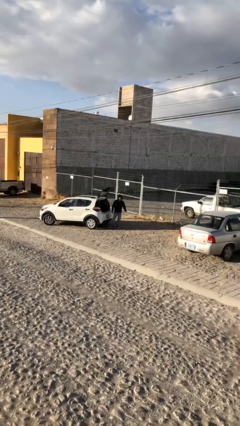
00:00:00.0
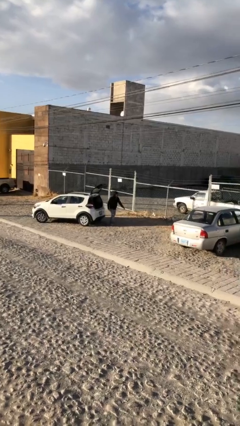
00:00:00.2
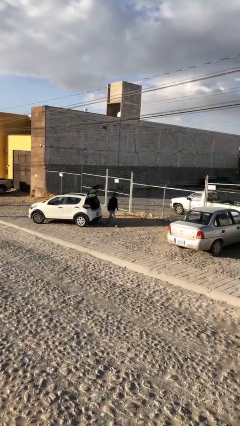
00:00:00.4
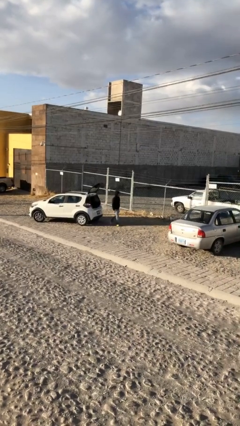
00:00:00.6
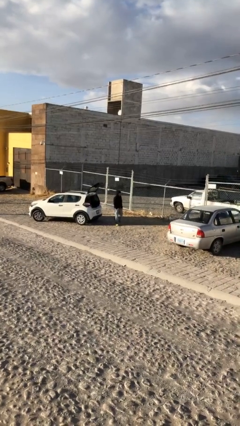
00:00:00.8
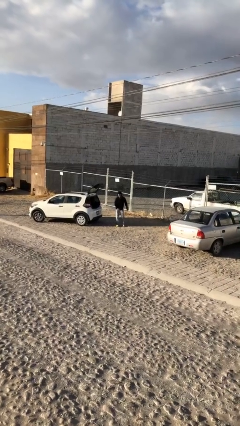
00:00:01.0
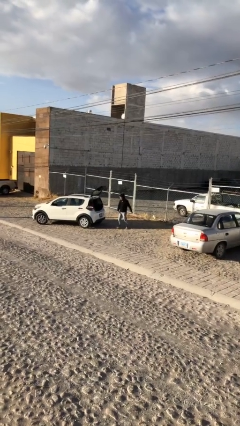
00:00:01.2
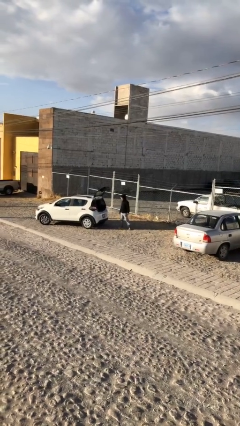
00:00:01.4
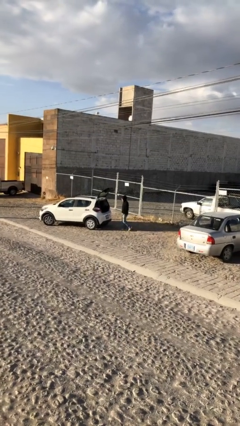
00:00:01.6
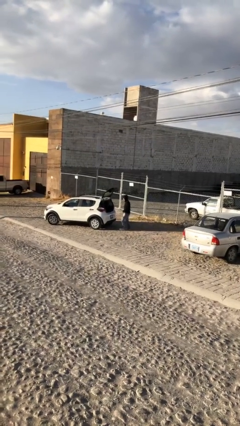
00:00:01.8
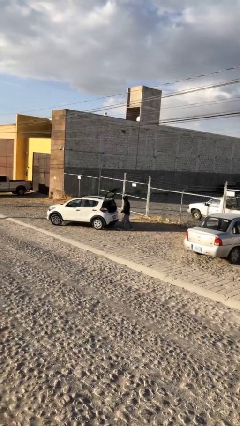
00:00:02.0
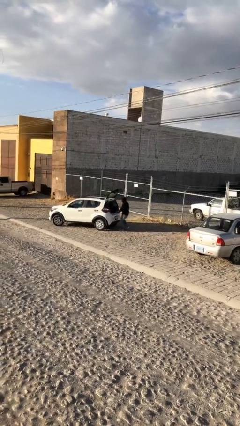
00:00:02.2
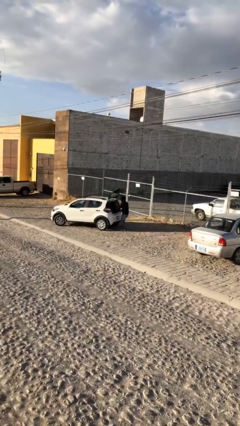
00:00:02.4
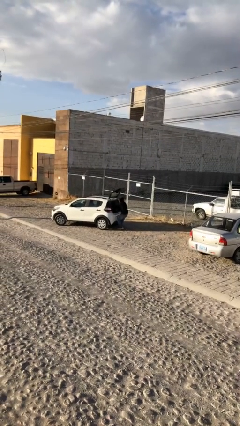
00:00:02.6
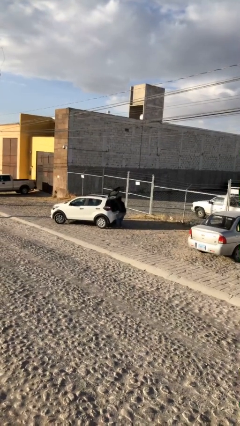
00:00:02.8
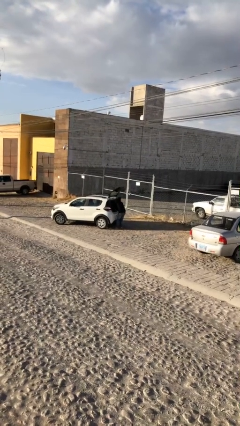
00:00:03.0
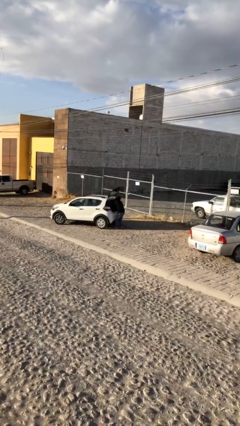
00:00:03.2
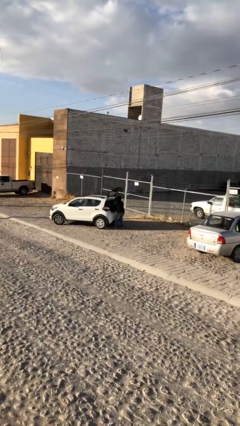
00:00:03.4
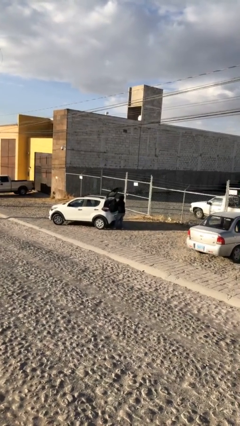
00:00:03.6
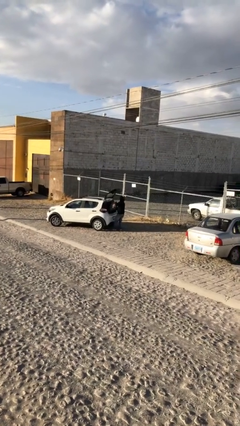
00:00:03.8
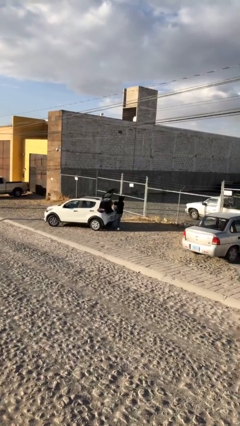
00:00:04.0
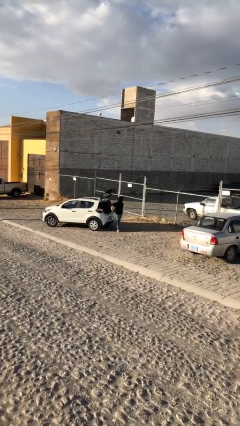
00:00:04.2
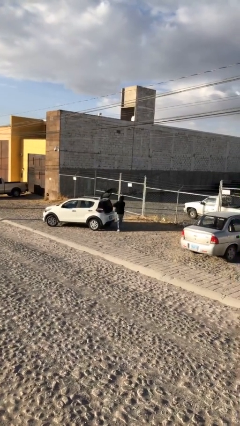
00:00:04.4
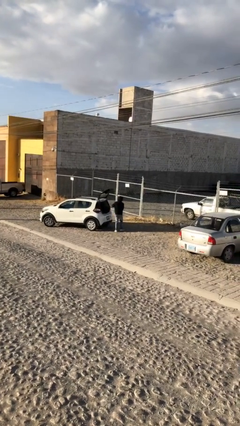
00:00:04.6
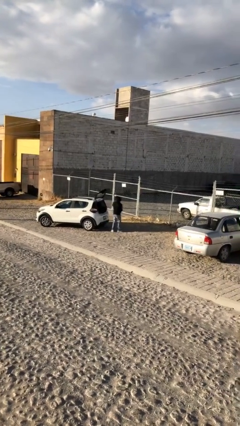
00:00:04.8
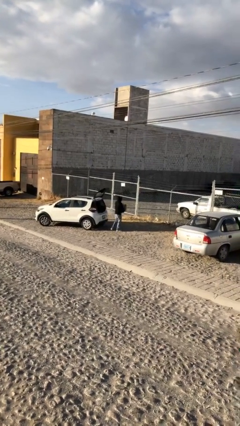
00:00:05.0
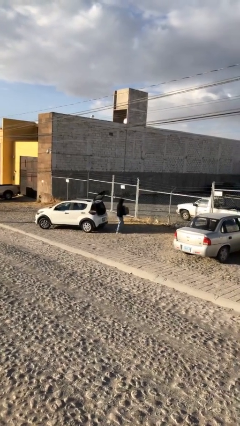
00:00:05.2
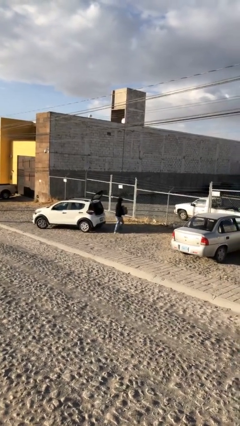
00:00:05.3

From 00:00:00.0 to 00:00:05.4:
person unloads car

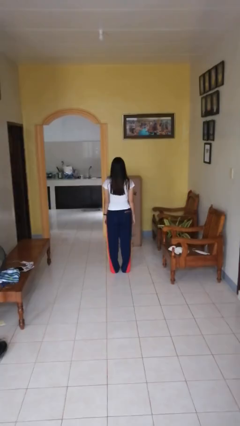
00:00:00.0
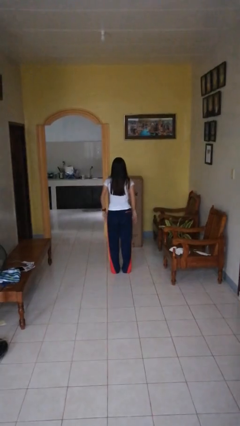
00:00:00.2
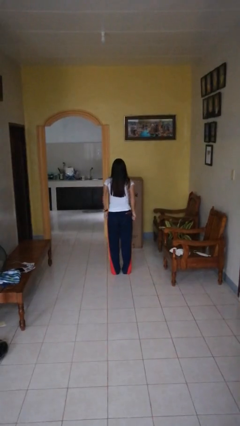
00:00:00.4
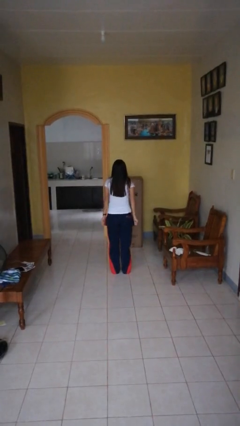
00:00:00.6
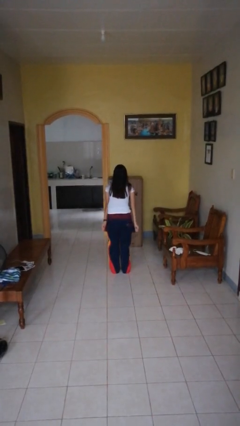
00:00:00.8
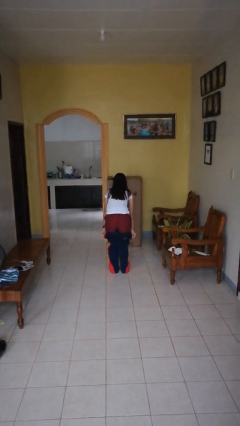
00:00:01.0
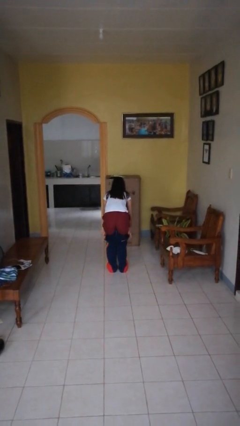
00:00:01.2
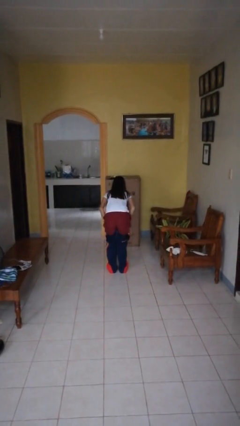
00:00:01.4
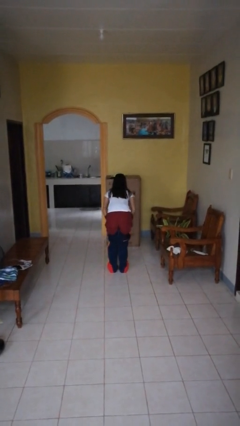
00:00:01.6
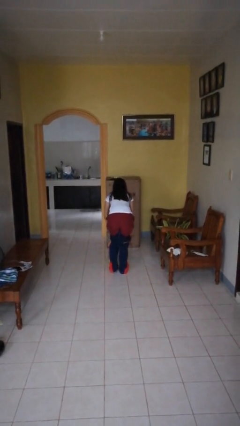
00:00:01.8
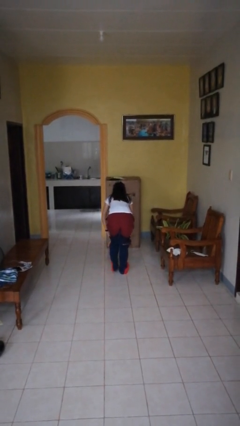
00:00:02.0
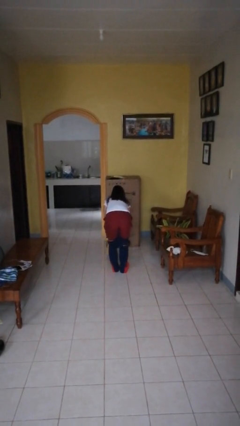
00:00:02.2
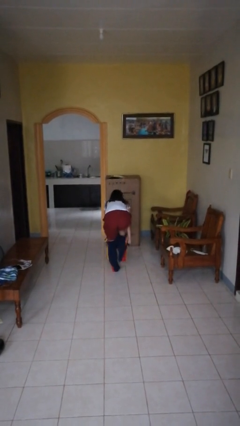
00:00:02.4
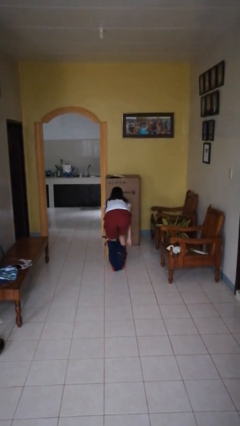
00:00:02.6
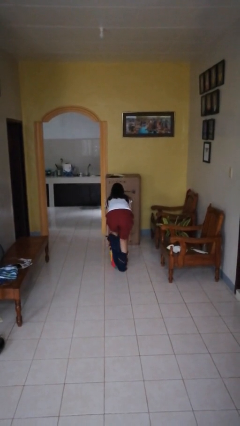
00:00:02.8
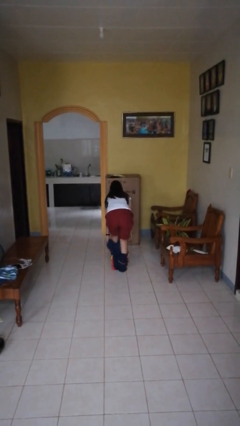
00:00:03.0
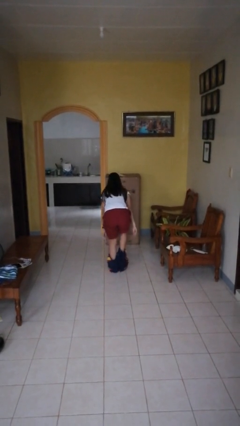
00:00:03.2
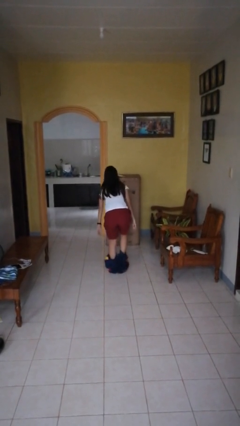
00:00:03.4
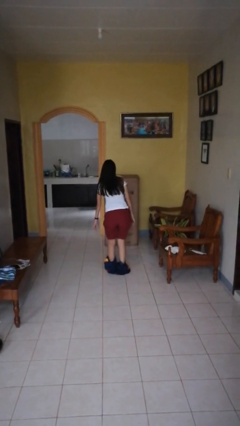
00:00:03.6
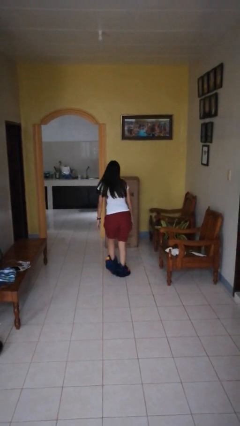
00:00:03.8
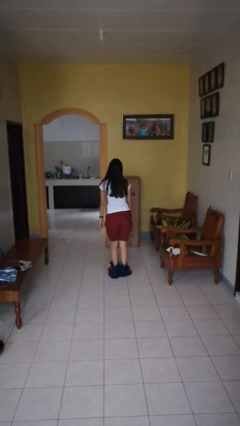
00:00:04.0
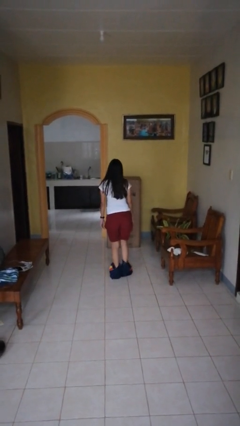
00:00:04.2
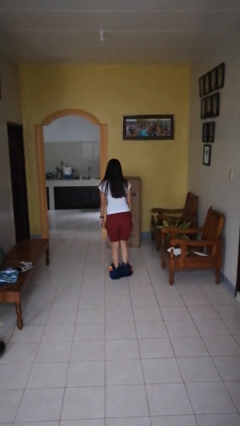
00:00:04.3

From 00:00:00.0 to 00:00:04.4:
person takes off pants

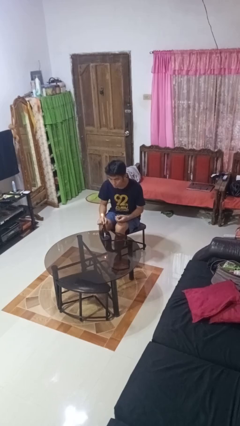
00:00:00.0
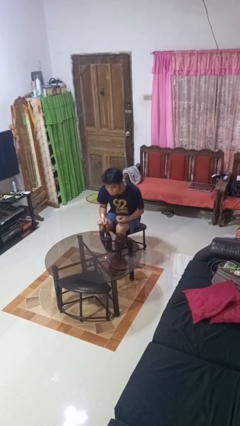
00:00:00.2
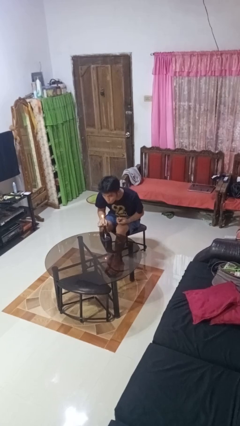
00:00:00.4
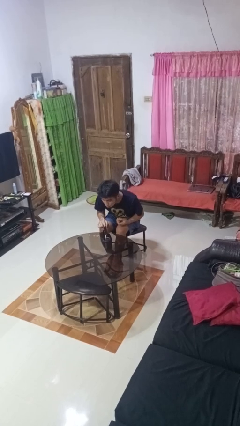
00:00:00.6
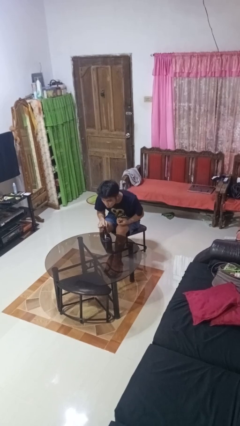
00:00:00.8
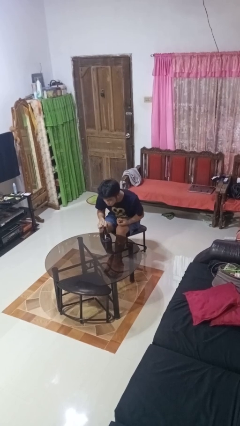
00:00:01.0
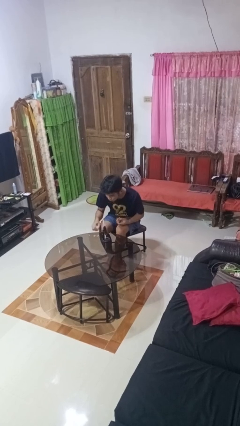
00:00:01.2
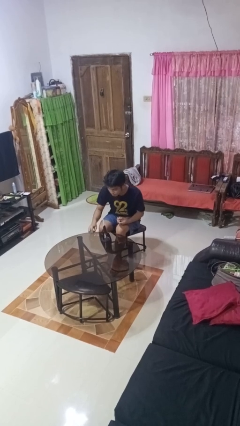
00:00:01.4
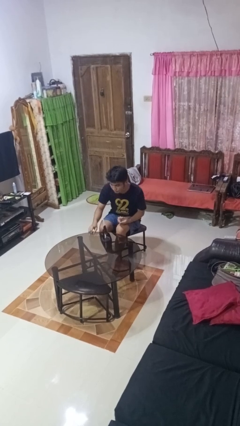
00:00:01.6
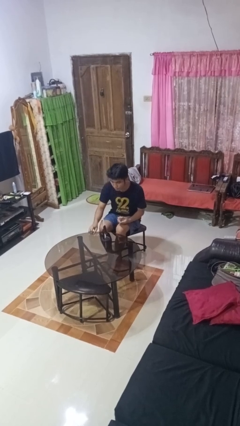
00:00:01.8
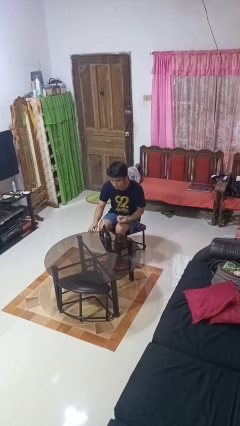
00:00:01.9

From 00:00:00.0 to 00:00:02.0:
person extinguishes candle

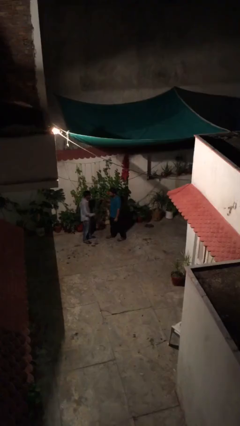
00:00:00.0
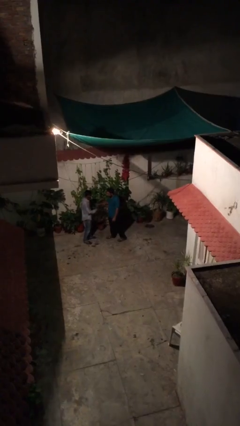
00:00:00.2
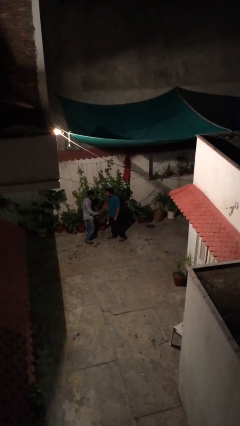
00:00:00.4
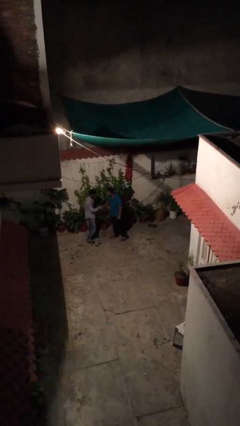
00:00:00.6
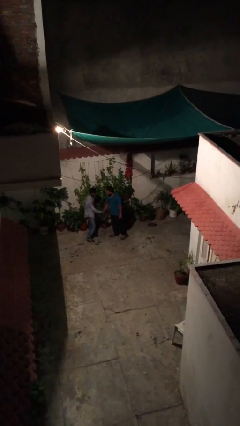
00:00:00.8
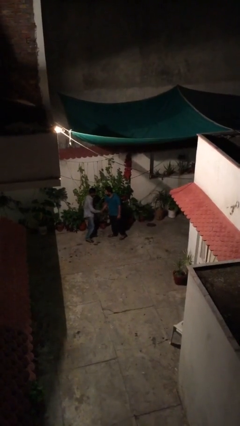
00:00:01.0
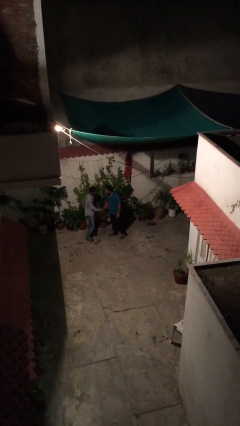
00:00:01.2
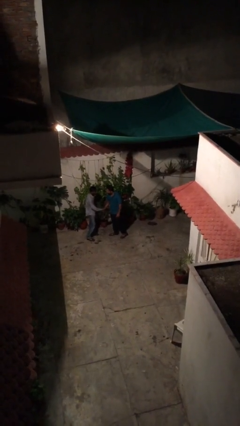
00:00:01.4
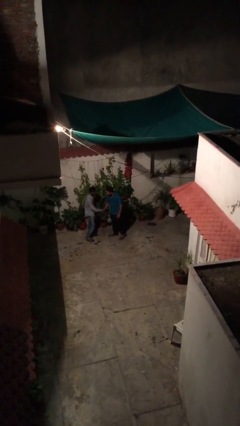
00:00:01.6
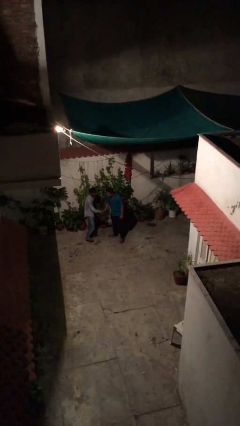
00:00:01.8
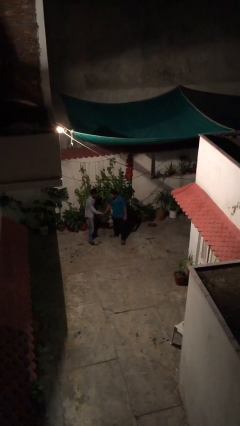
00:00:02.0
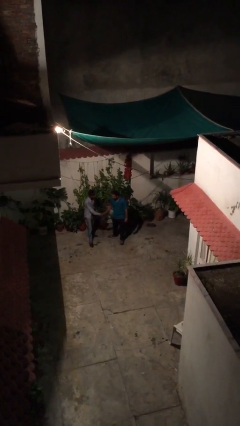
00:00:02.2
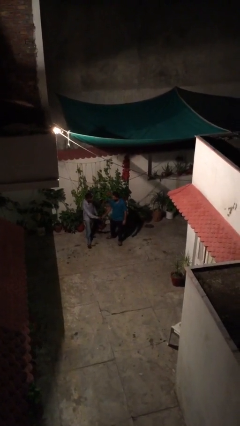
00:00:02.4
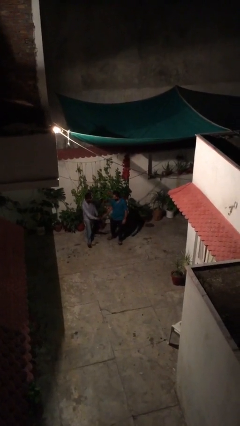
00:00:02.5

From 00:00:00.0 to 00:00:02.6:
person shakes hand

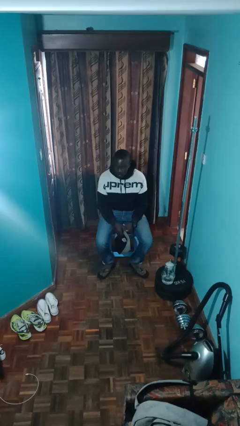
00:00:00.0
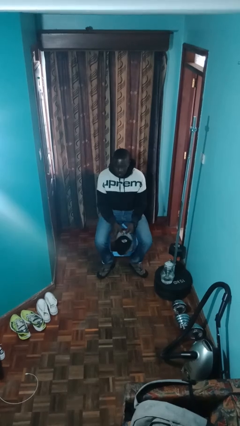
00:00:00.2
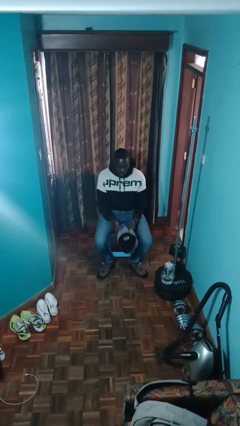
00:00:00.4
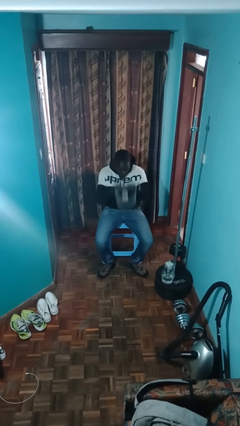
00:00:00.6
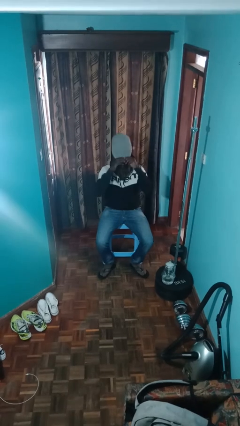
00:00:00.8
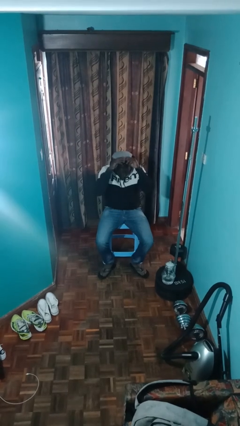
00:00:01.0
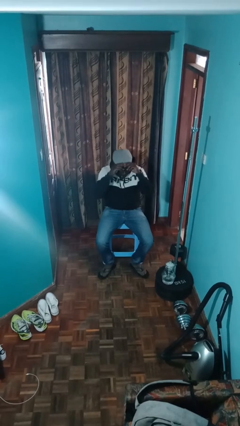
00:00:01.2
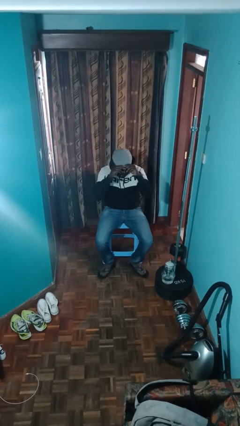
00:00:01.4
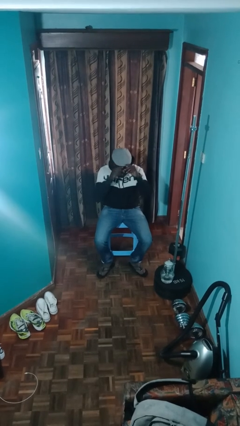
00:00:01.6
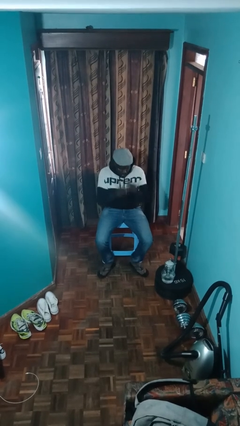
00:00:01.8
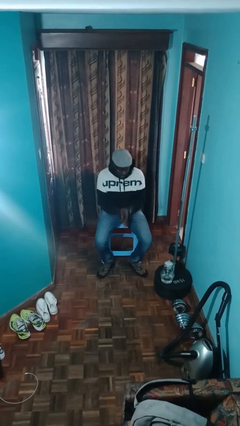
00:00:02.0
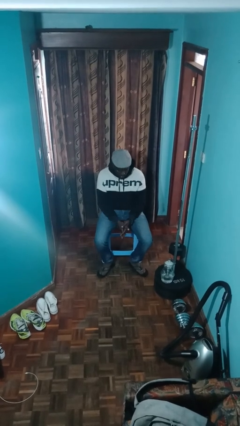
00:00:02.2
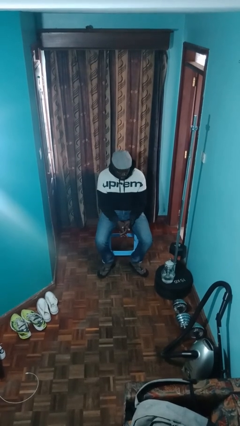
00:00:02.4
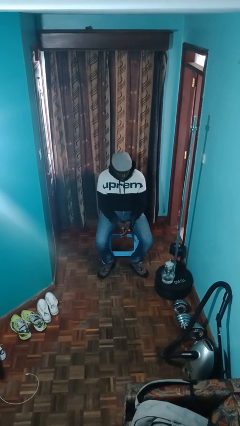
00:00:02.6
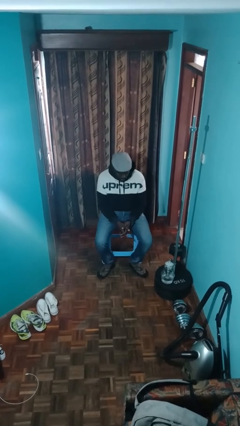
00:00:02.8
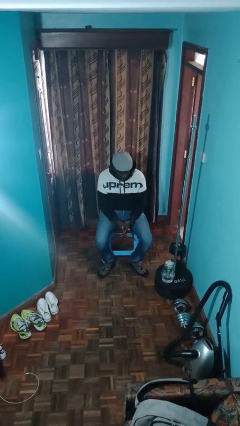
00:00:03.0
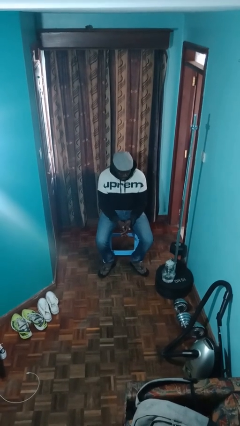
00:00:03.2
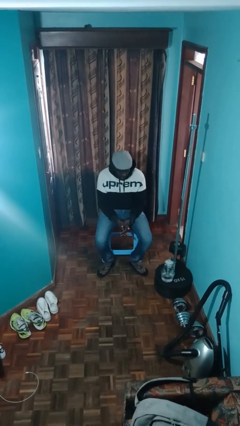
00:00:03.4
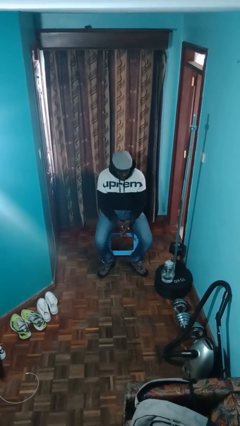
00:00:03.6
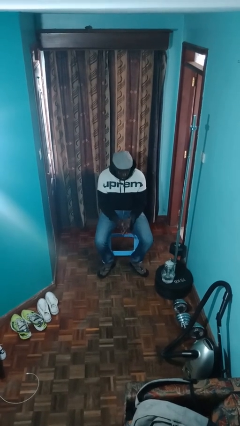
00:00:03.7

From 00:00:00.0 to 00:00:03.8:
person puts on hat
